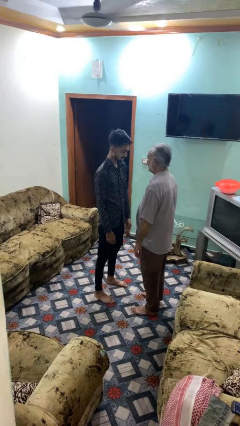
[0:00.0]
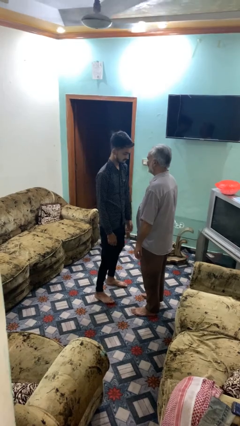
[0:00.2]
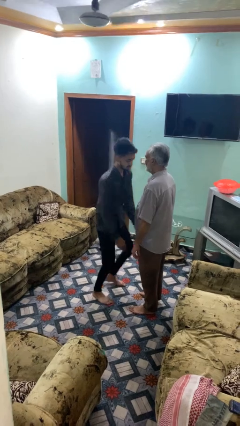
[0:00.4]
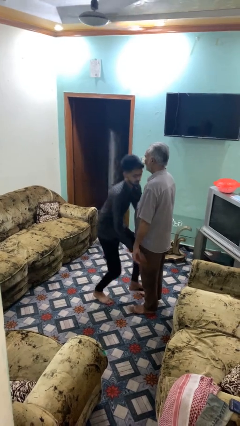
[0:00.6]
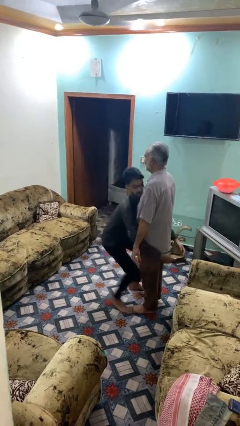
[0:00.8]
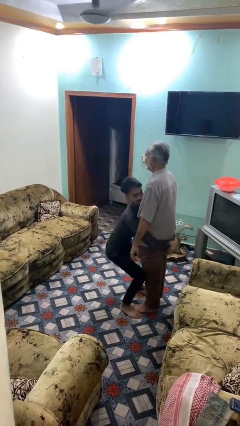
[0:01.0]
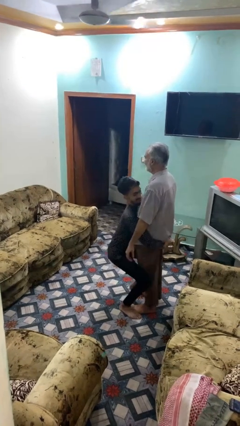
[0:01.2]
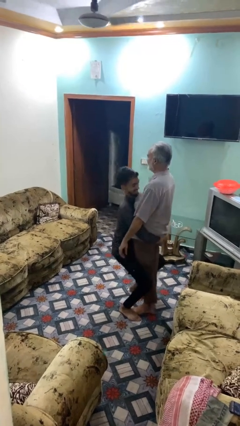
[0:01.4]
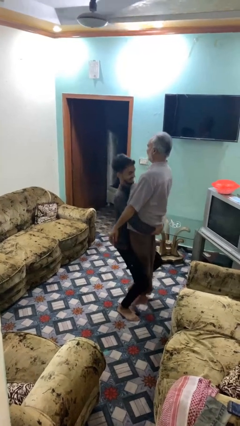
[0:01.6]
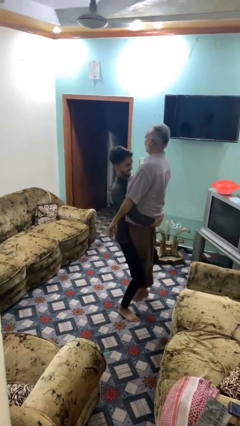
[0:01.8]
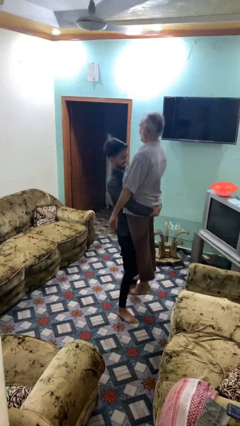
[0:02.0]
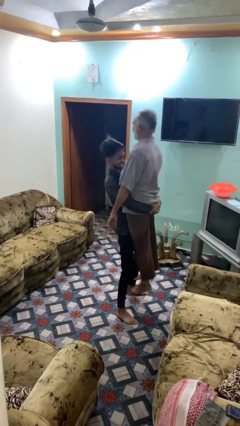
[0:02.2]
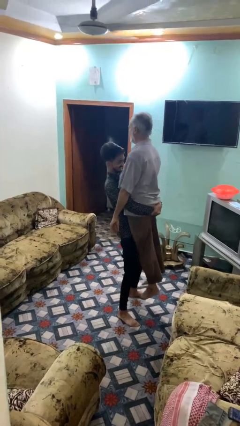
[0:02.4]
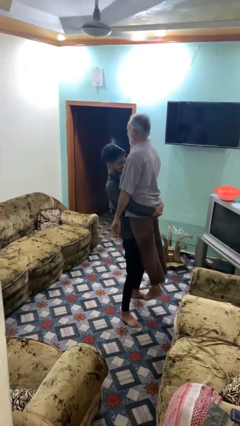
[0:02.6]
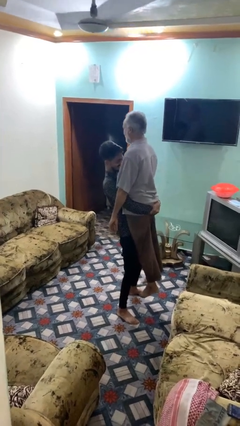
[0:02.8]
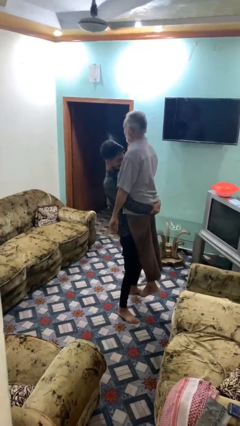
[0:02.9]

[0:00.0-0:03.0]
person picks up person

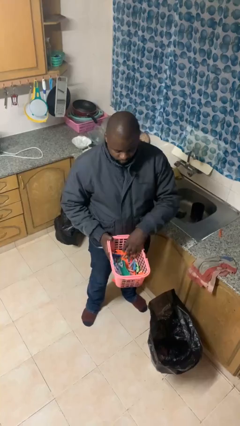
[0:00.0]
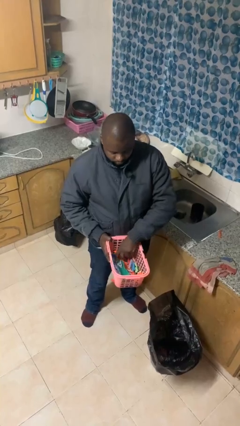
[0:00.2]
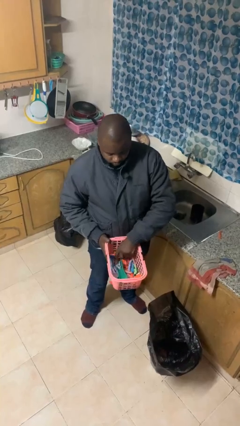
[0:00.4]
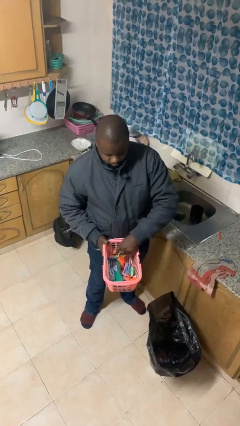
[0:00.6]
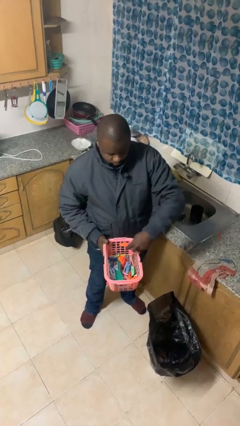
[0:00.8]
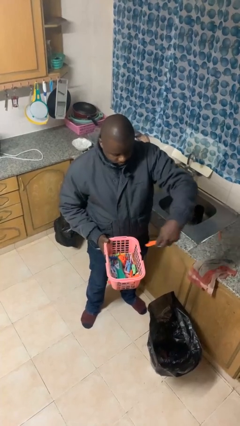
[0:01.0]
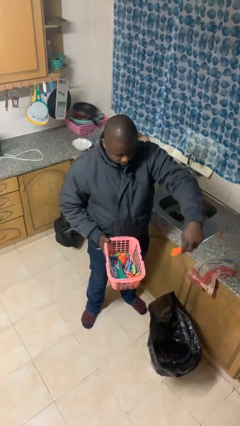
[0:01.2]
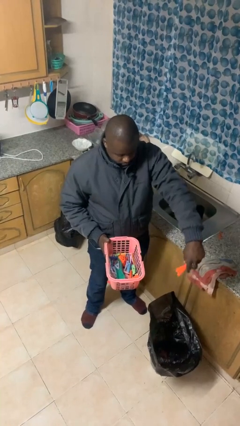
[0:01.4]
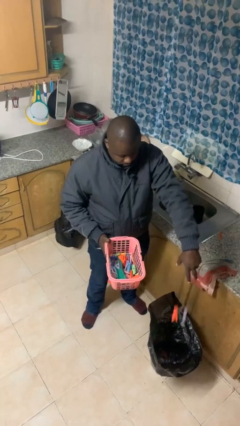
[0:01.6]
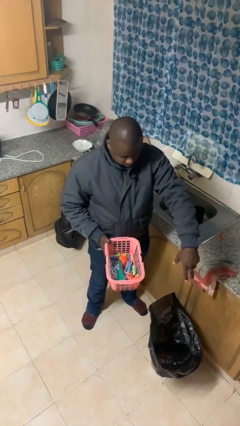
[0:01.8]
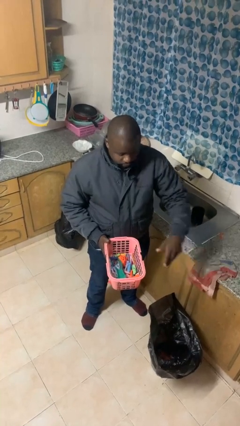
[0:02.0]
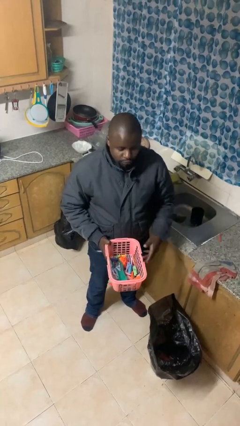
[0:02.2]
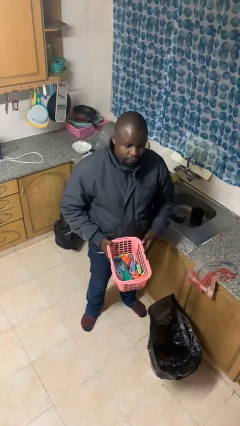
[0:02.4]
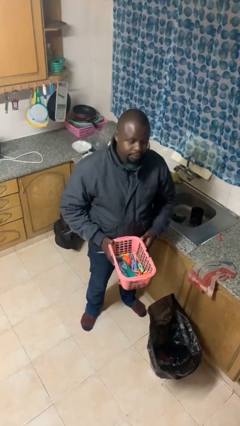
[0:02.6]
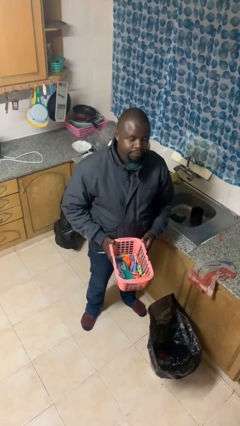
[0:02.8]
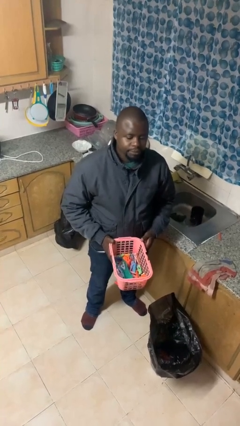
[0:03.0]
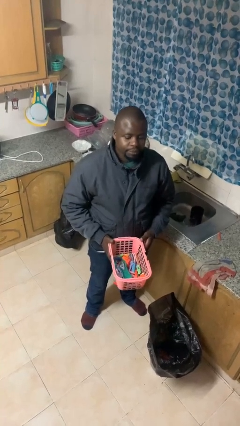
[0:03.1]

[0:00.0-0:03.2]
person discards trash

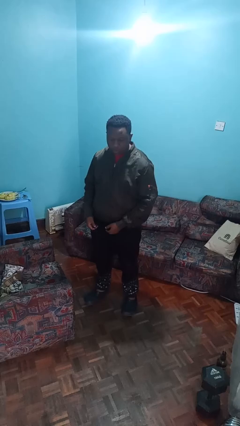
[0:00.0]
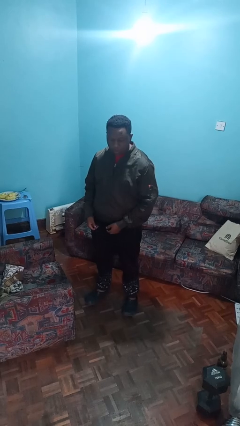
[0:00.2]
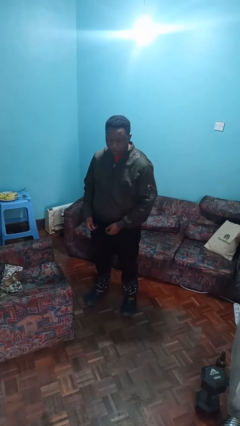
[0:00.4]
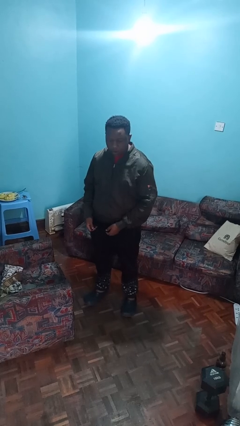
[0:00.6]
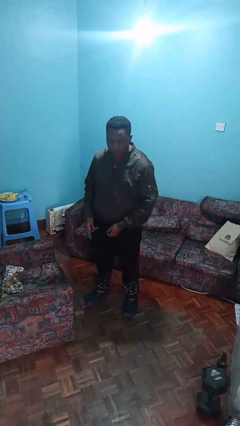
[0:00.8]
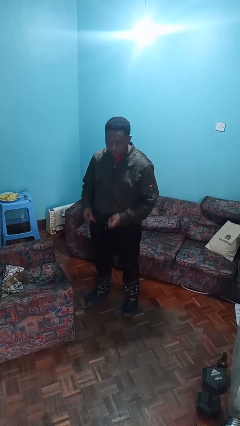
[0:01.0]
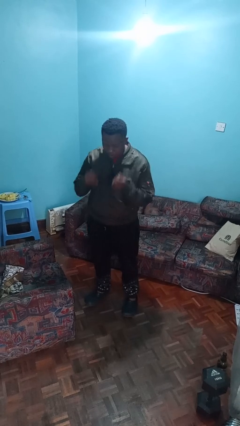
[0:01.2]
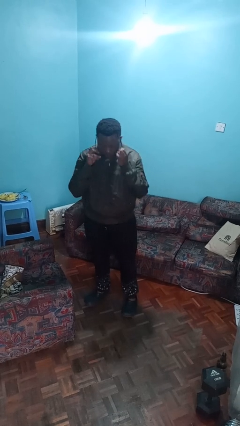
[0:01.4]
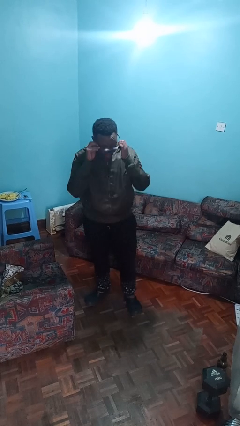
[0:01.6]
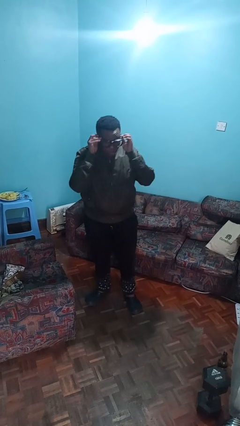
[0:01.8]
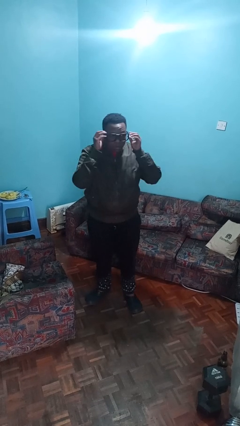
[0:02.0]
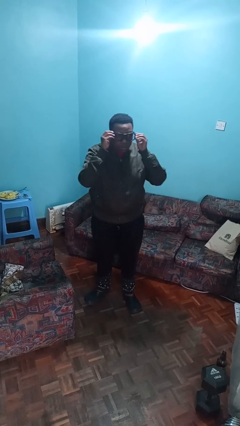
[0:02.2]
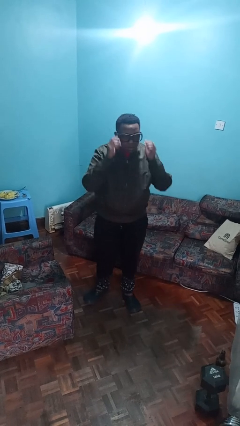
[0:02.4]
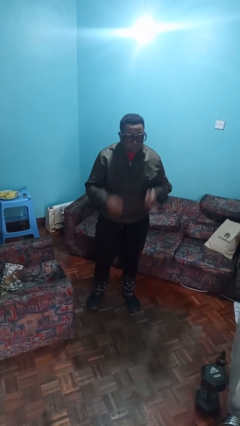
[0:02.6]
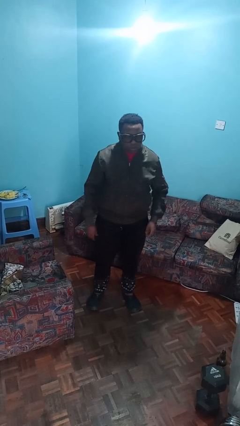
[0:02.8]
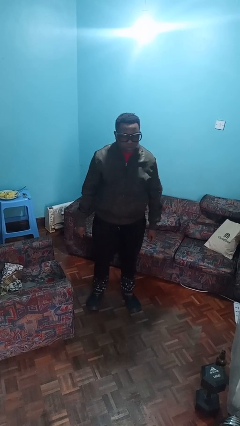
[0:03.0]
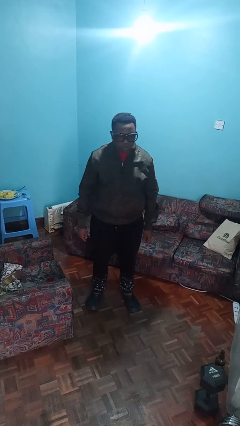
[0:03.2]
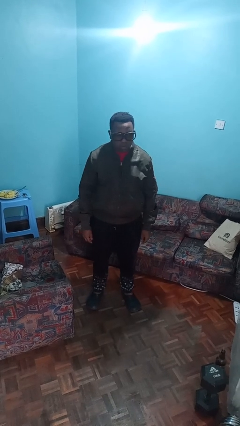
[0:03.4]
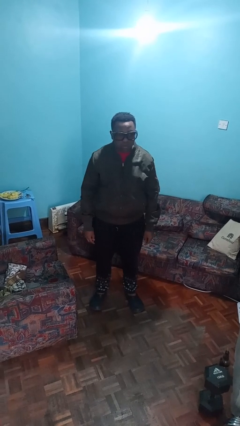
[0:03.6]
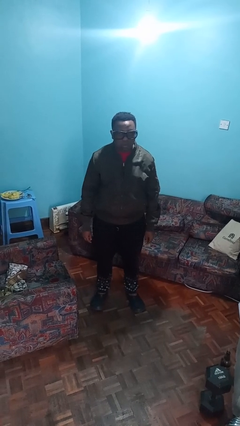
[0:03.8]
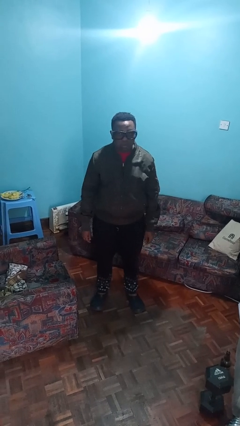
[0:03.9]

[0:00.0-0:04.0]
person puts on glasses

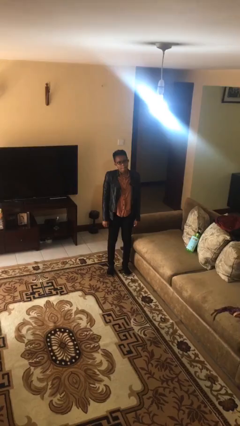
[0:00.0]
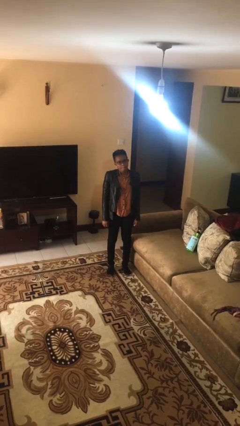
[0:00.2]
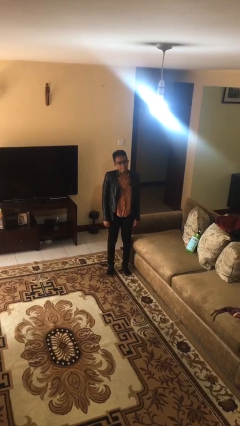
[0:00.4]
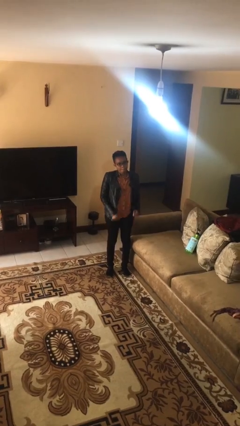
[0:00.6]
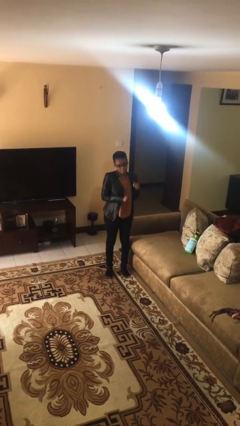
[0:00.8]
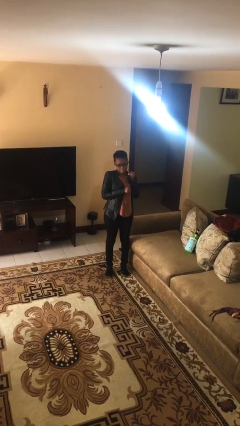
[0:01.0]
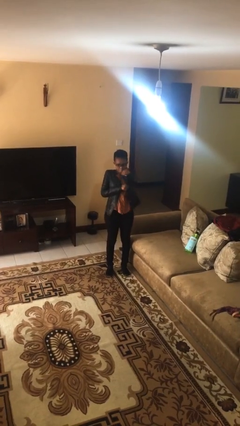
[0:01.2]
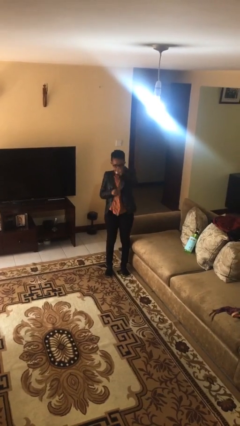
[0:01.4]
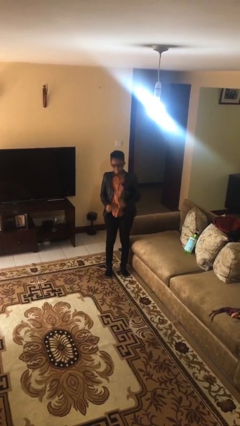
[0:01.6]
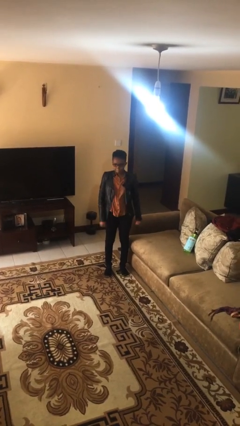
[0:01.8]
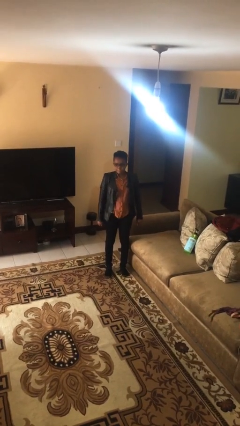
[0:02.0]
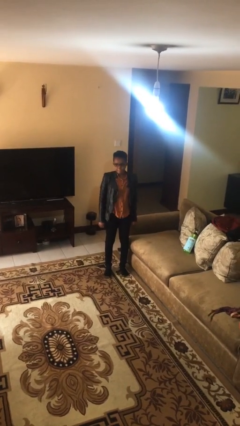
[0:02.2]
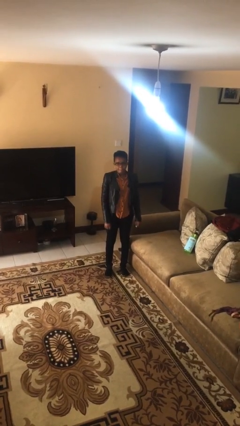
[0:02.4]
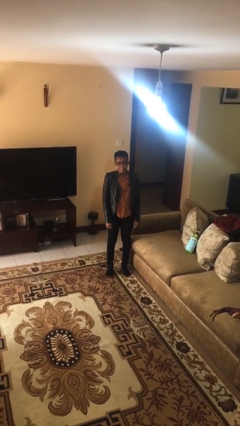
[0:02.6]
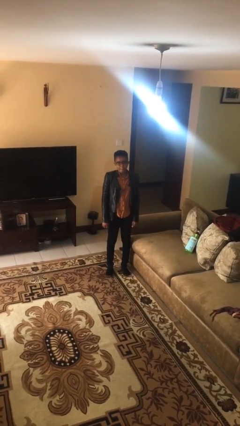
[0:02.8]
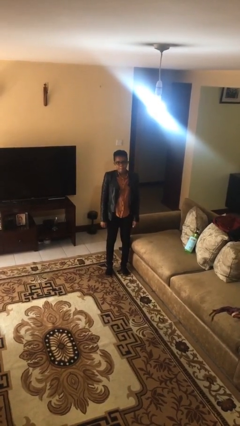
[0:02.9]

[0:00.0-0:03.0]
person punches

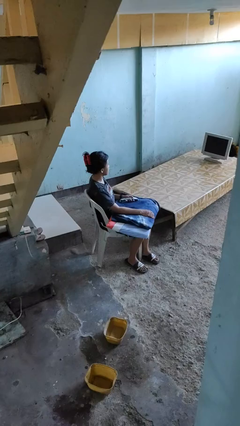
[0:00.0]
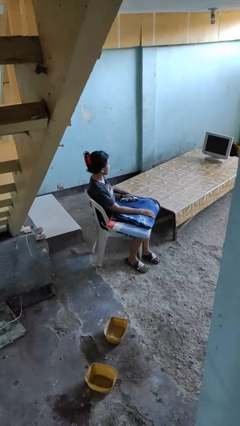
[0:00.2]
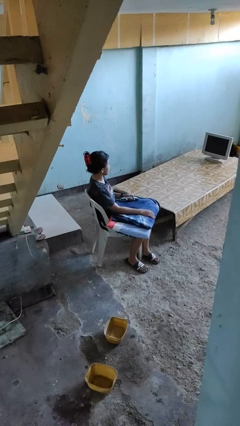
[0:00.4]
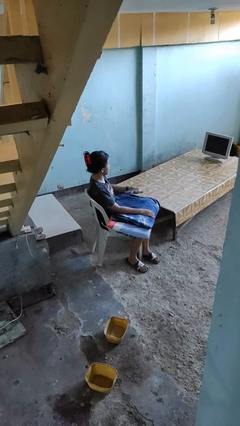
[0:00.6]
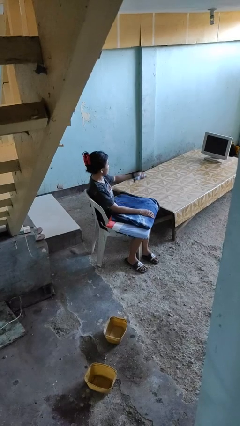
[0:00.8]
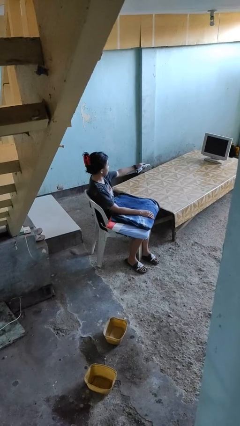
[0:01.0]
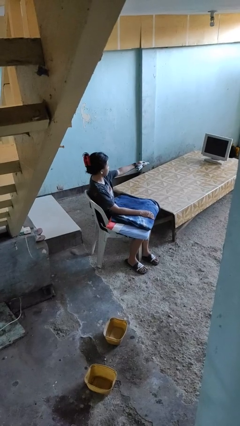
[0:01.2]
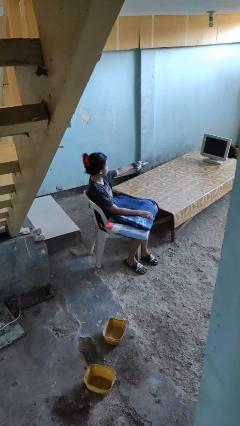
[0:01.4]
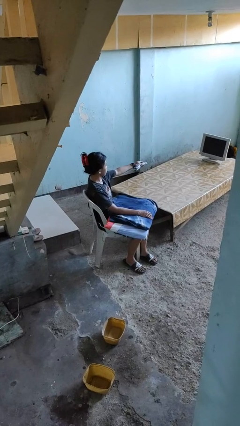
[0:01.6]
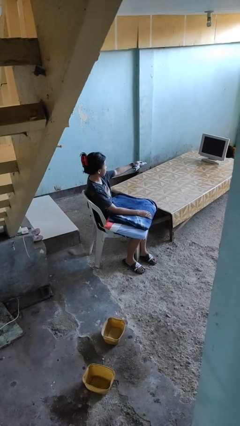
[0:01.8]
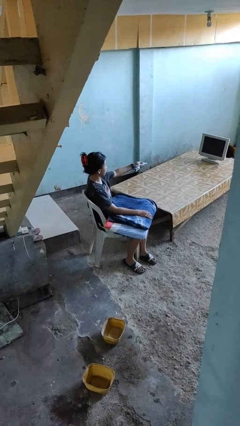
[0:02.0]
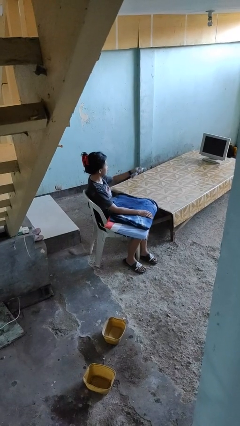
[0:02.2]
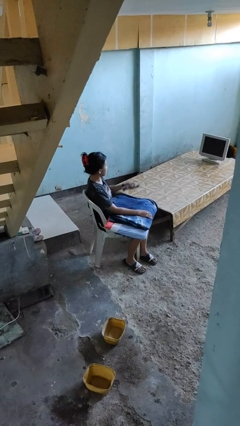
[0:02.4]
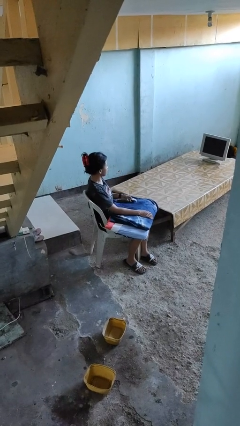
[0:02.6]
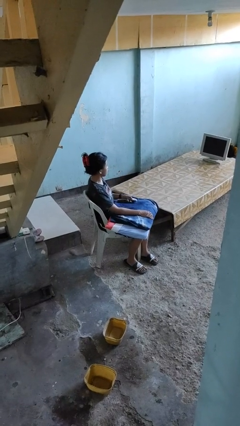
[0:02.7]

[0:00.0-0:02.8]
person uses television remote

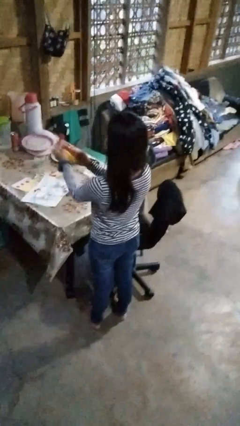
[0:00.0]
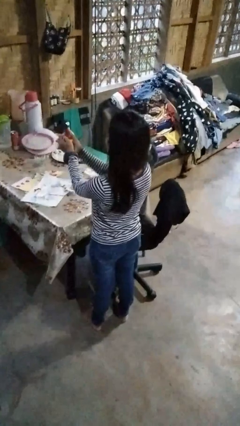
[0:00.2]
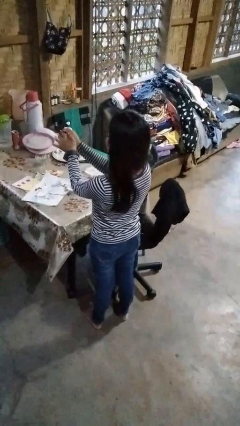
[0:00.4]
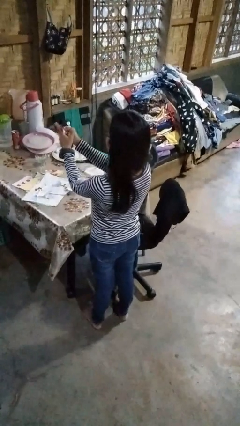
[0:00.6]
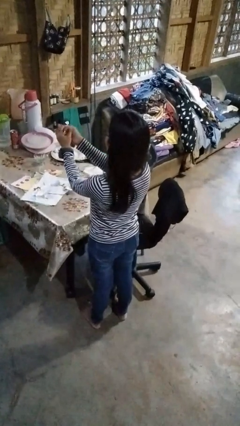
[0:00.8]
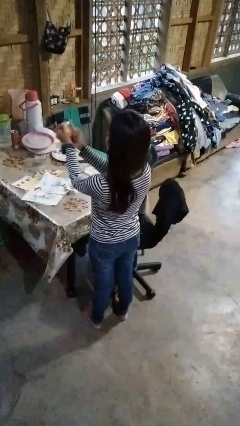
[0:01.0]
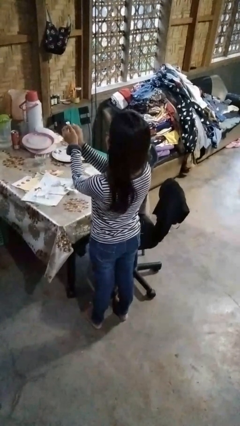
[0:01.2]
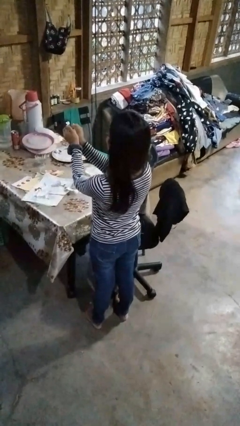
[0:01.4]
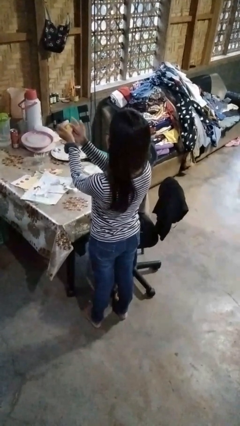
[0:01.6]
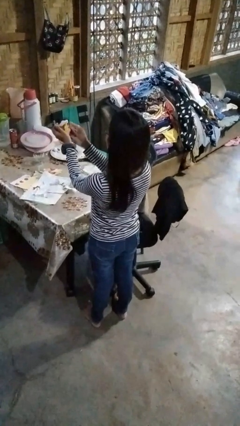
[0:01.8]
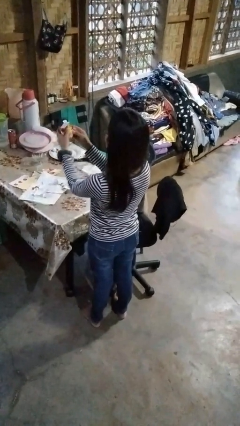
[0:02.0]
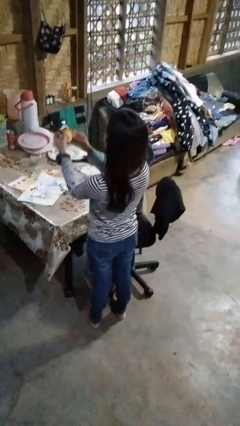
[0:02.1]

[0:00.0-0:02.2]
person crumples paper
